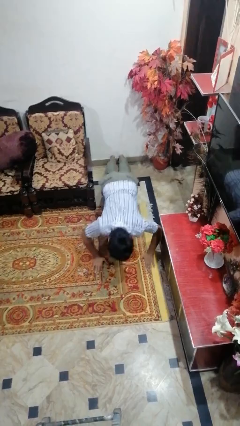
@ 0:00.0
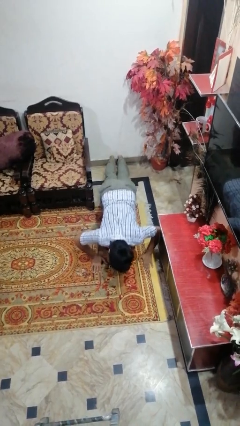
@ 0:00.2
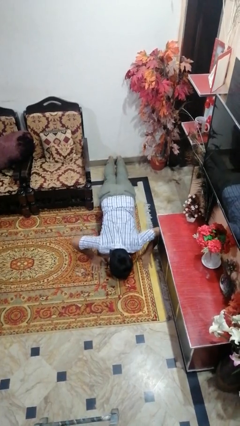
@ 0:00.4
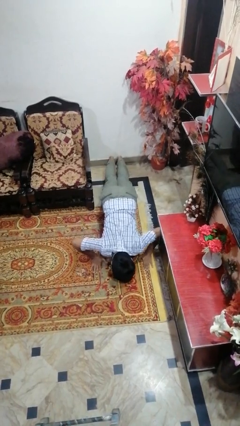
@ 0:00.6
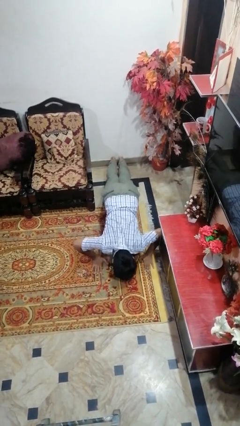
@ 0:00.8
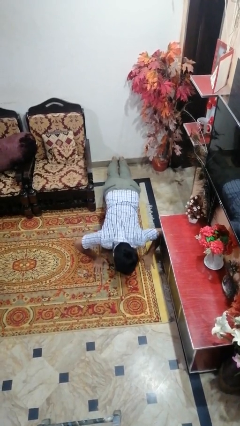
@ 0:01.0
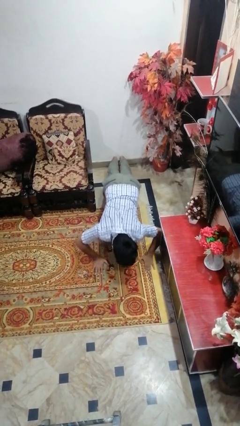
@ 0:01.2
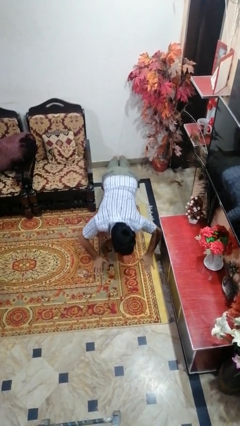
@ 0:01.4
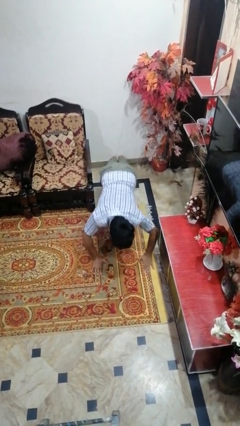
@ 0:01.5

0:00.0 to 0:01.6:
person exercises with pushup

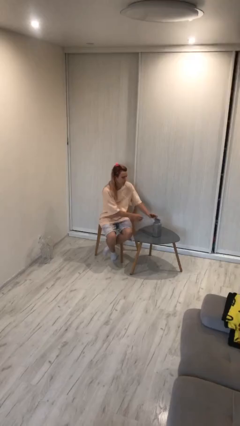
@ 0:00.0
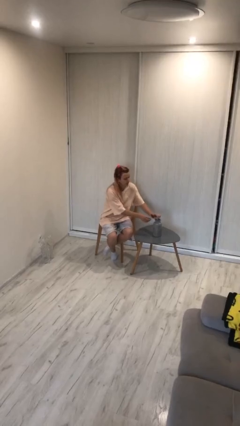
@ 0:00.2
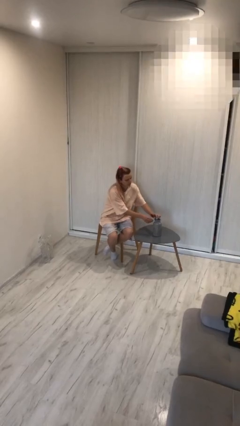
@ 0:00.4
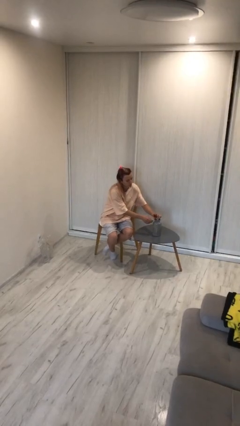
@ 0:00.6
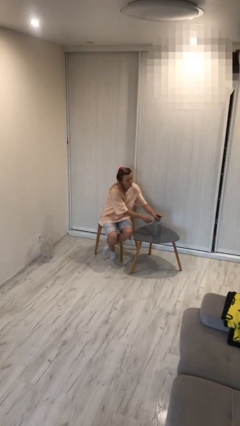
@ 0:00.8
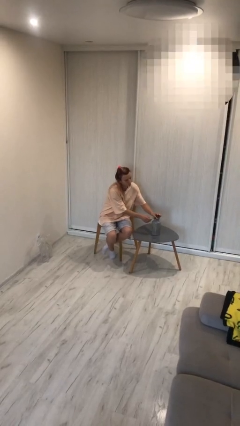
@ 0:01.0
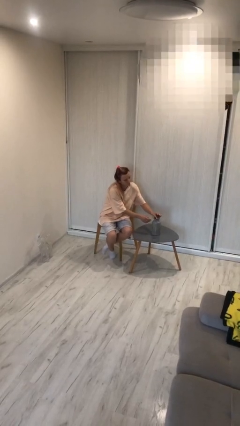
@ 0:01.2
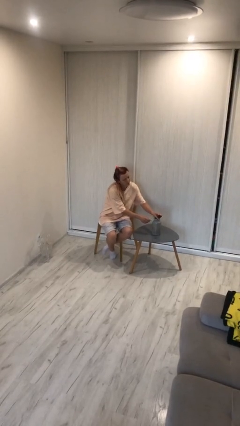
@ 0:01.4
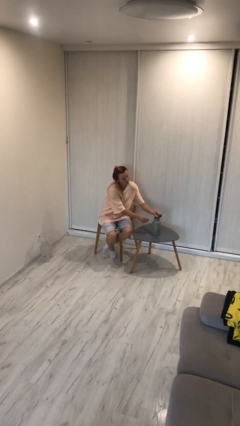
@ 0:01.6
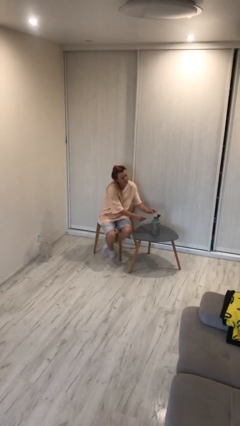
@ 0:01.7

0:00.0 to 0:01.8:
person arranges flowers in vase

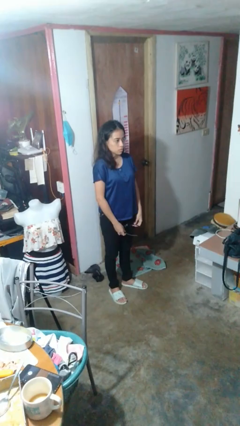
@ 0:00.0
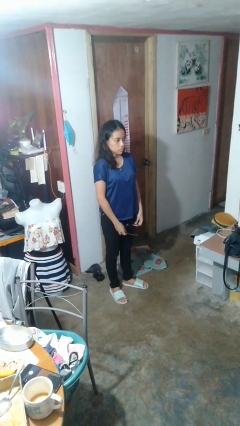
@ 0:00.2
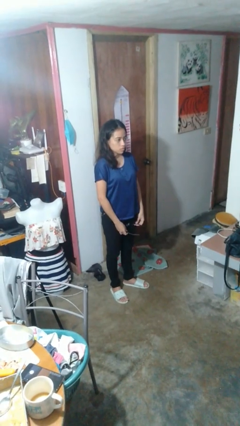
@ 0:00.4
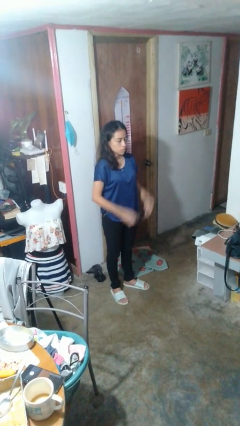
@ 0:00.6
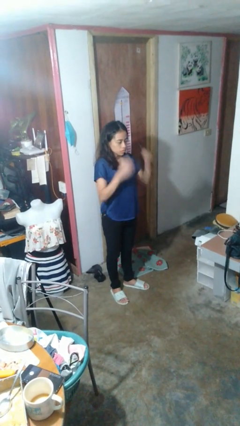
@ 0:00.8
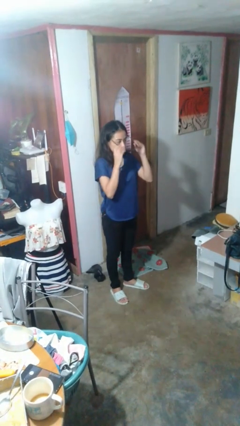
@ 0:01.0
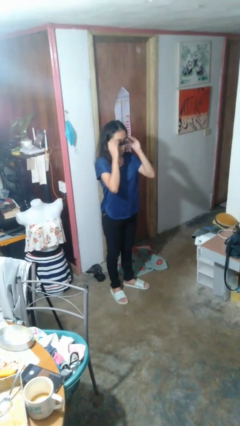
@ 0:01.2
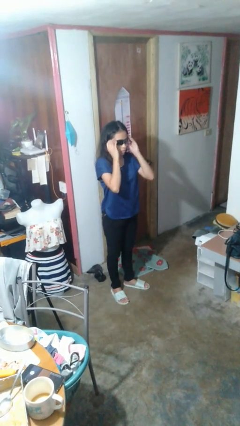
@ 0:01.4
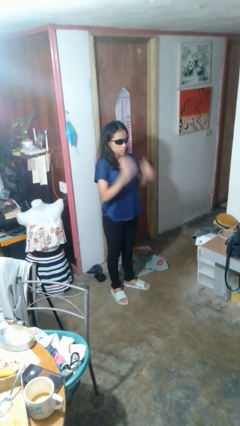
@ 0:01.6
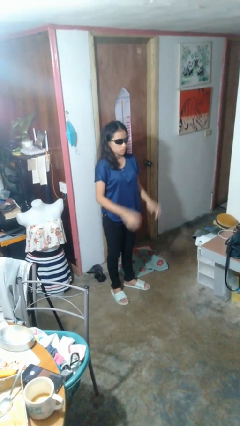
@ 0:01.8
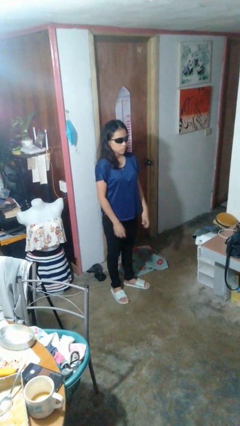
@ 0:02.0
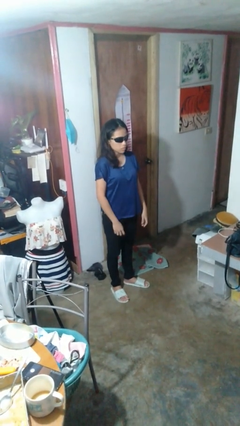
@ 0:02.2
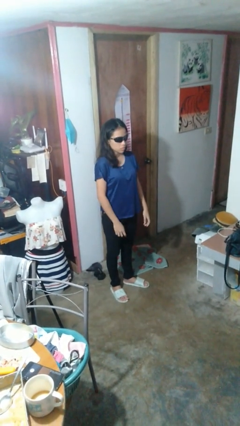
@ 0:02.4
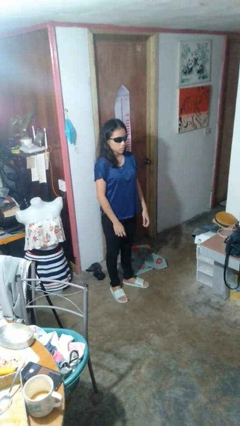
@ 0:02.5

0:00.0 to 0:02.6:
person puts on sunglasses

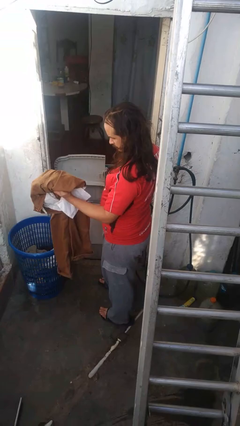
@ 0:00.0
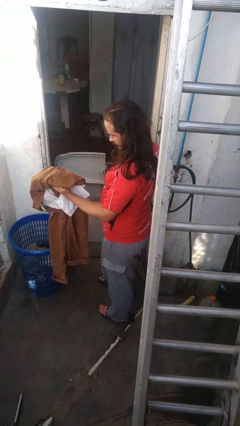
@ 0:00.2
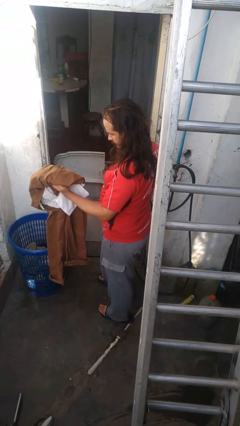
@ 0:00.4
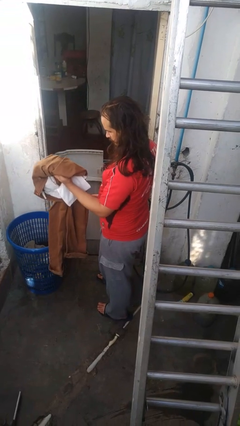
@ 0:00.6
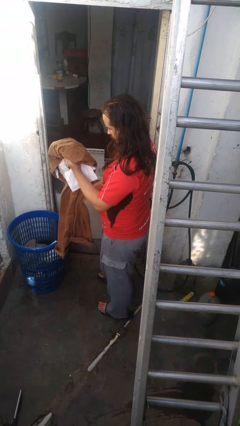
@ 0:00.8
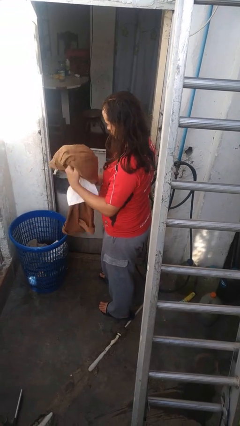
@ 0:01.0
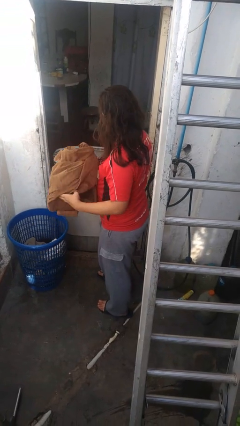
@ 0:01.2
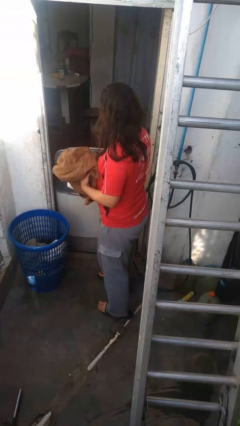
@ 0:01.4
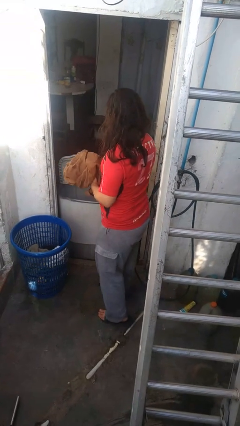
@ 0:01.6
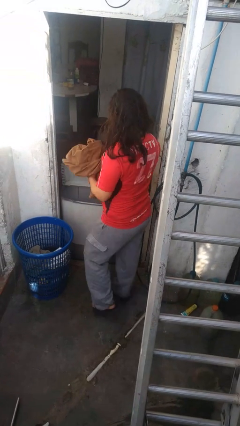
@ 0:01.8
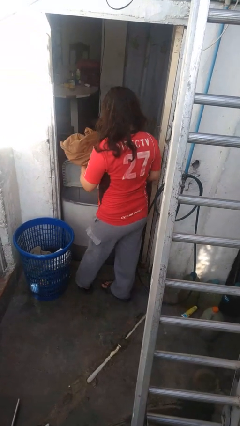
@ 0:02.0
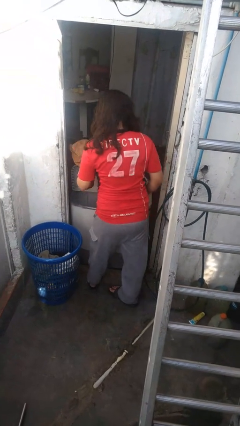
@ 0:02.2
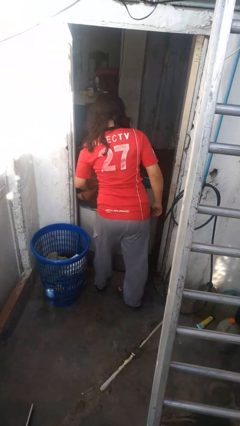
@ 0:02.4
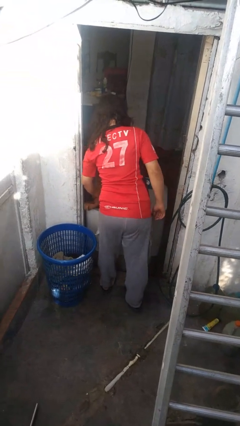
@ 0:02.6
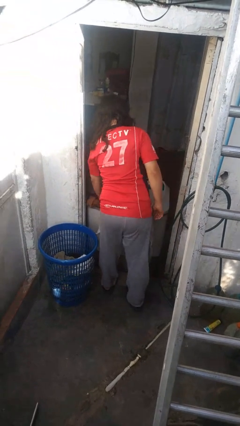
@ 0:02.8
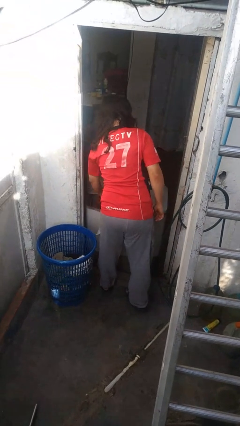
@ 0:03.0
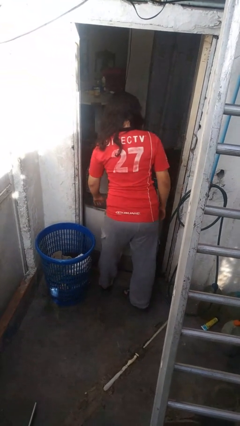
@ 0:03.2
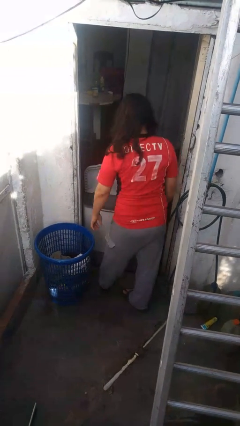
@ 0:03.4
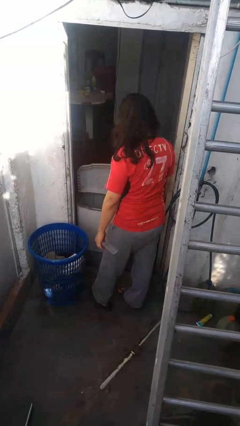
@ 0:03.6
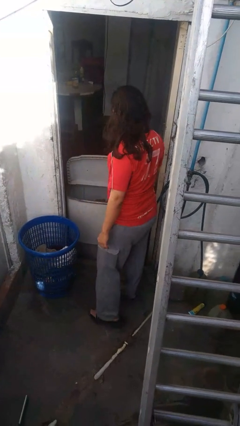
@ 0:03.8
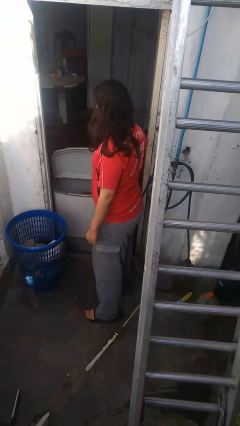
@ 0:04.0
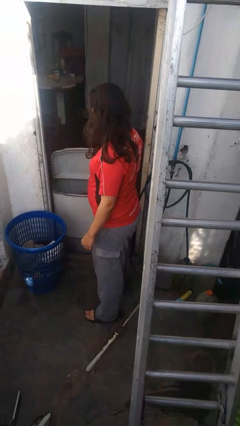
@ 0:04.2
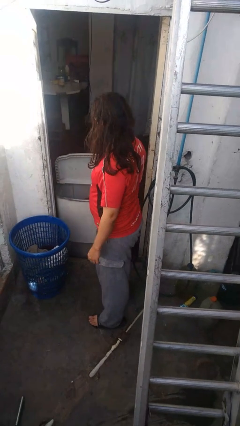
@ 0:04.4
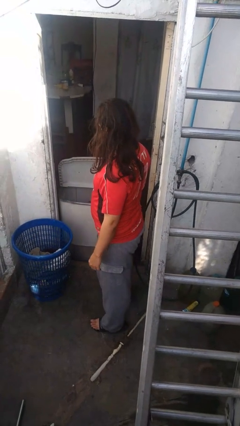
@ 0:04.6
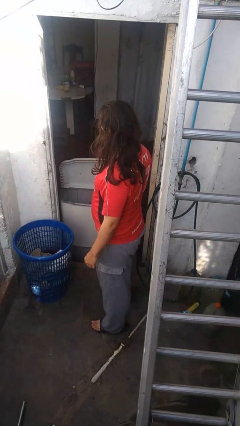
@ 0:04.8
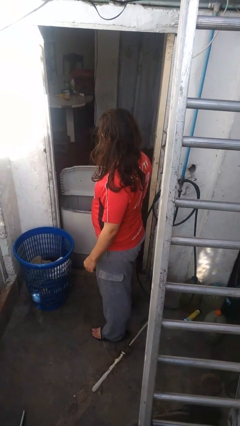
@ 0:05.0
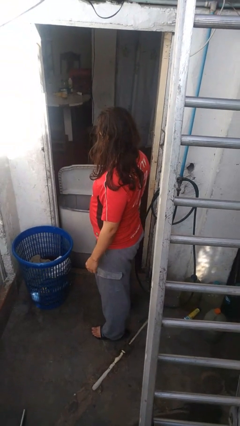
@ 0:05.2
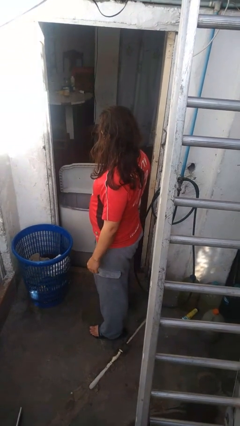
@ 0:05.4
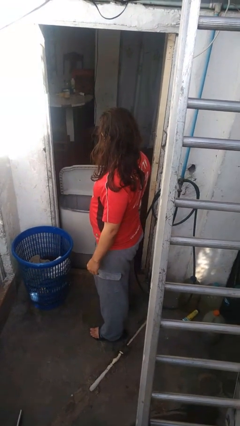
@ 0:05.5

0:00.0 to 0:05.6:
person loads clotheswasher

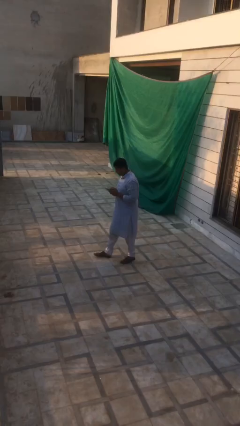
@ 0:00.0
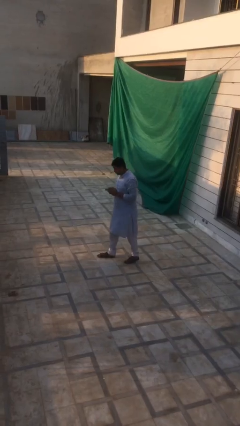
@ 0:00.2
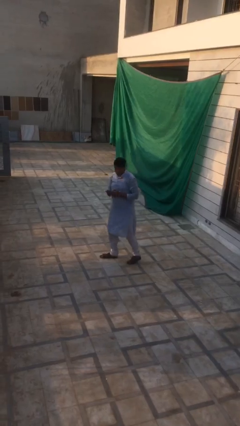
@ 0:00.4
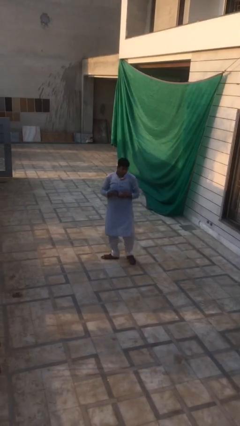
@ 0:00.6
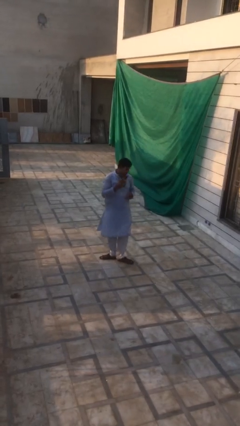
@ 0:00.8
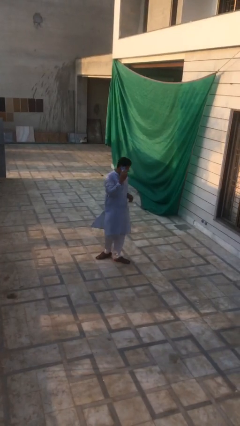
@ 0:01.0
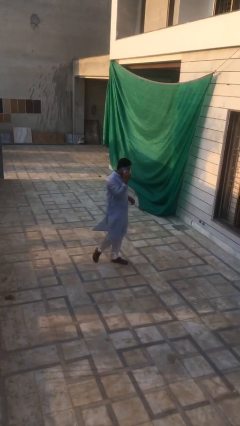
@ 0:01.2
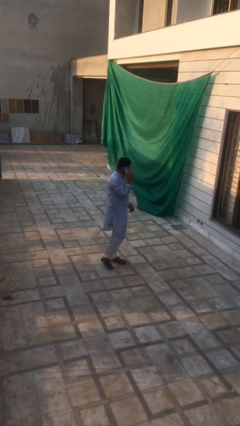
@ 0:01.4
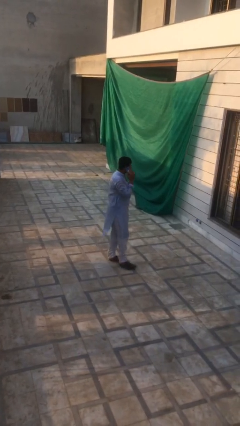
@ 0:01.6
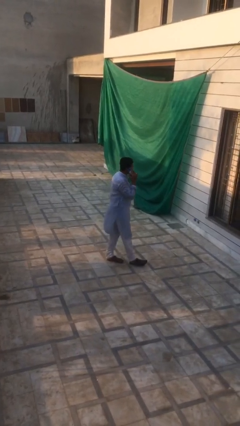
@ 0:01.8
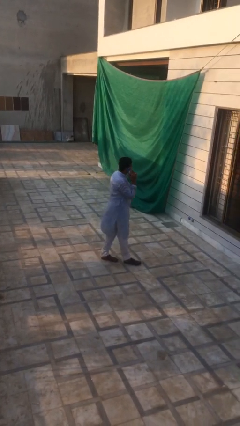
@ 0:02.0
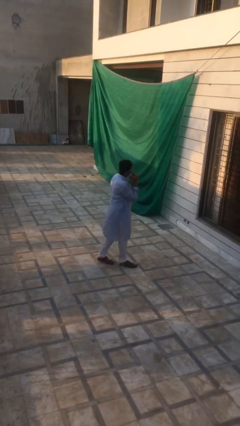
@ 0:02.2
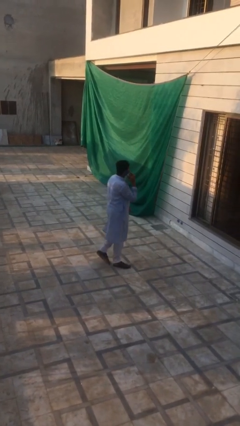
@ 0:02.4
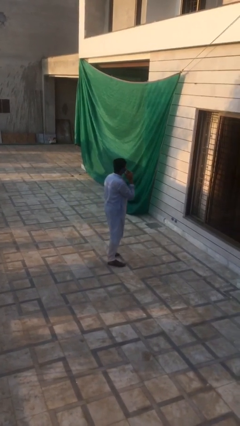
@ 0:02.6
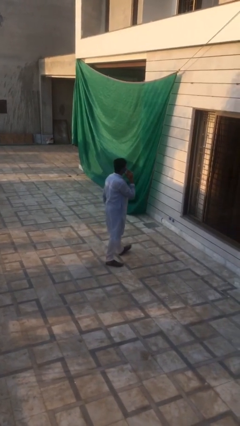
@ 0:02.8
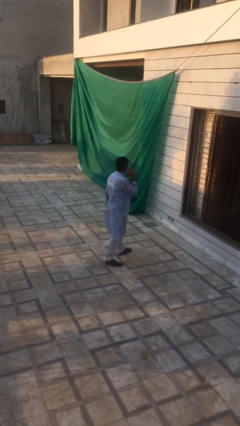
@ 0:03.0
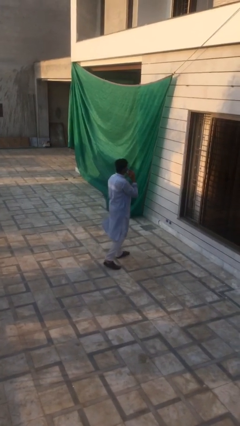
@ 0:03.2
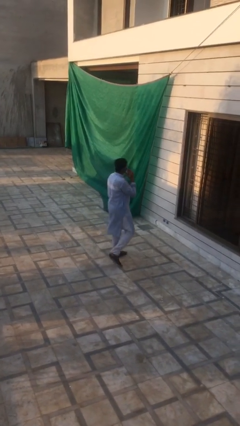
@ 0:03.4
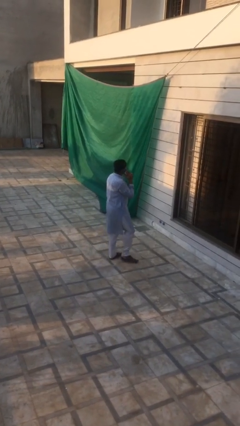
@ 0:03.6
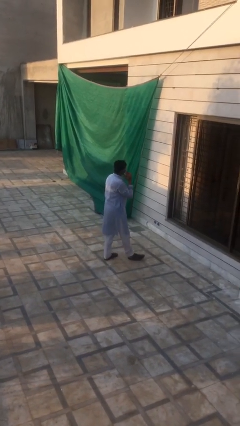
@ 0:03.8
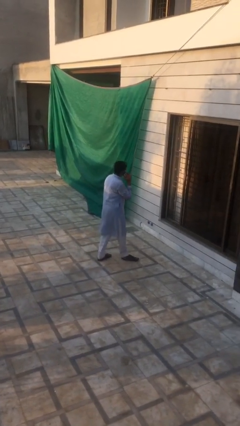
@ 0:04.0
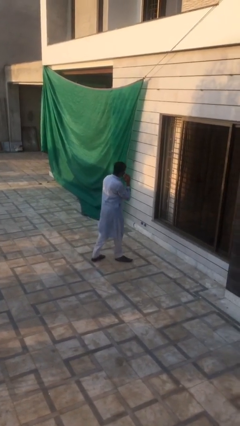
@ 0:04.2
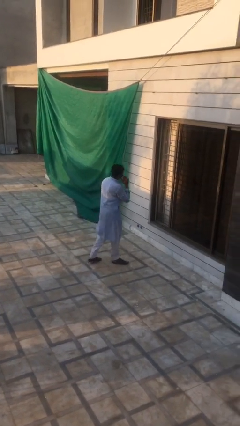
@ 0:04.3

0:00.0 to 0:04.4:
person talks on phone

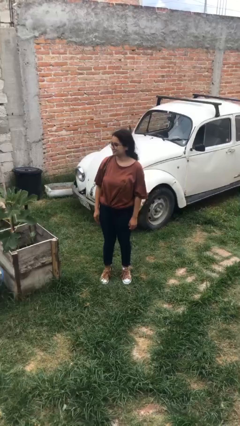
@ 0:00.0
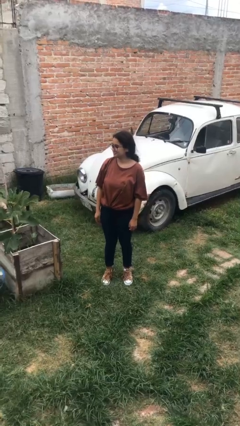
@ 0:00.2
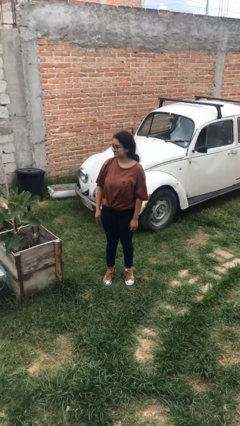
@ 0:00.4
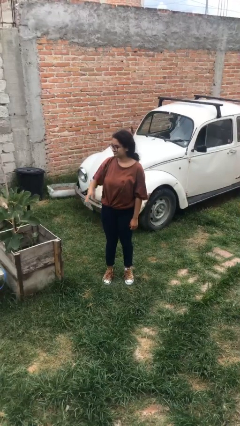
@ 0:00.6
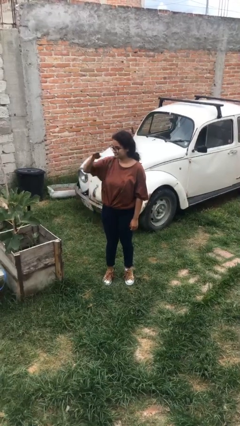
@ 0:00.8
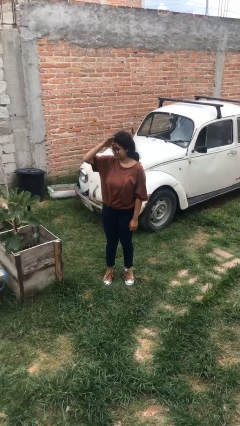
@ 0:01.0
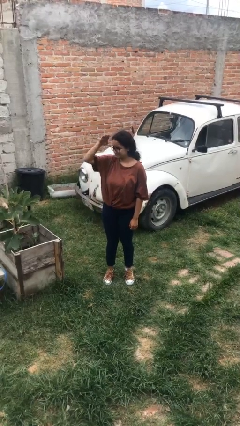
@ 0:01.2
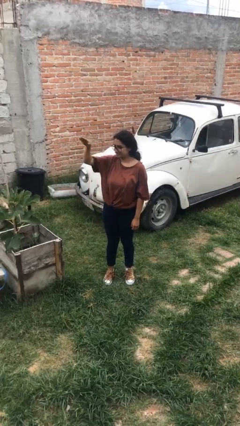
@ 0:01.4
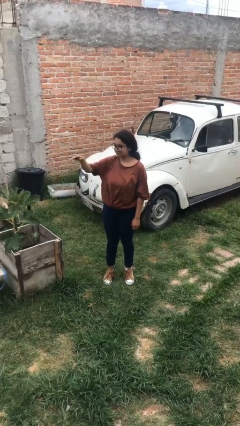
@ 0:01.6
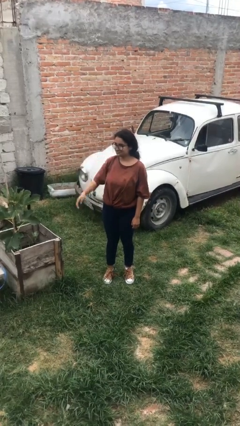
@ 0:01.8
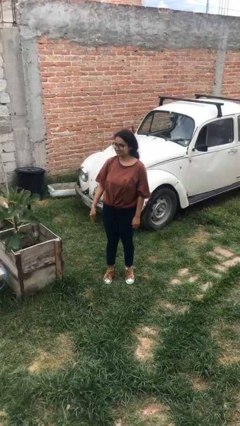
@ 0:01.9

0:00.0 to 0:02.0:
person salutes
